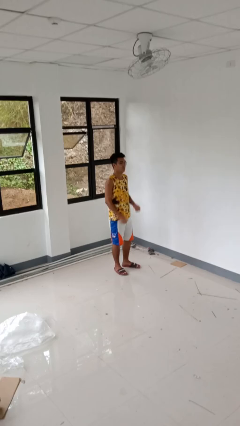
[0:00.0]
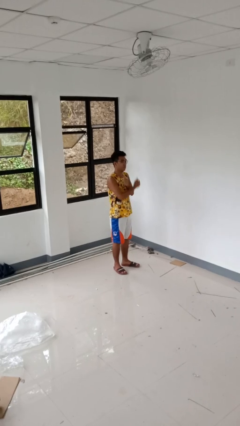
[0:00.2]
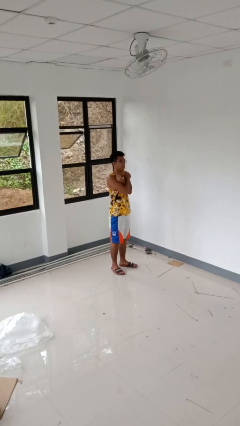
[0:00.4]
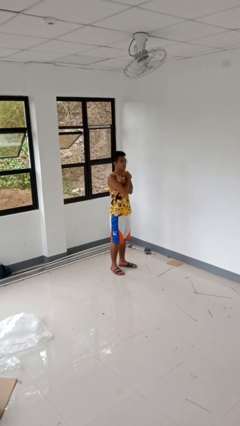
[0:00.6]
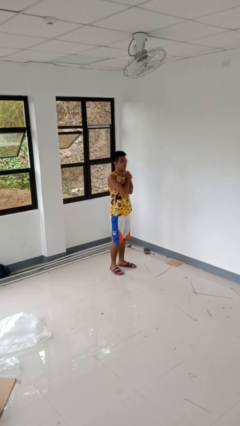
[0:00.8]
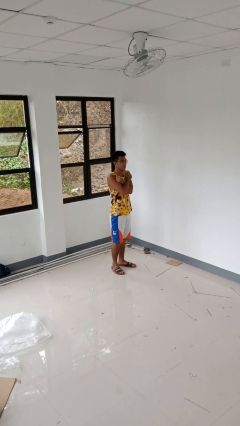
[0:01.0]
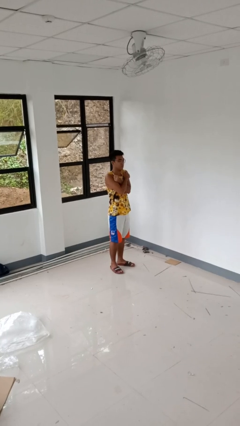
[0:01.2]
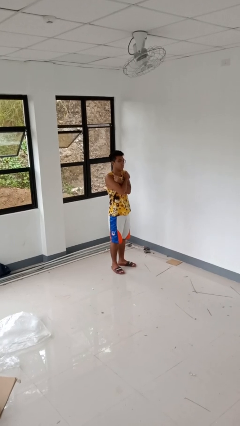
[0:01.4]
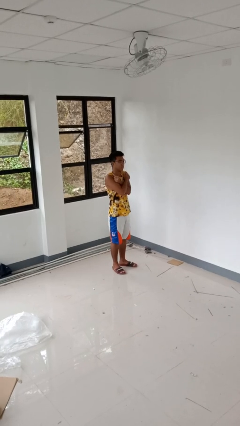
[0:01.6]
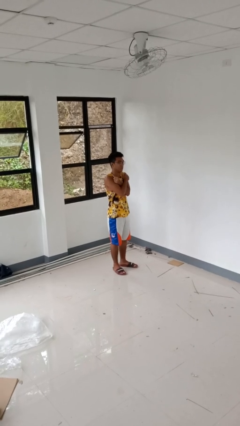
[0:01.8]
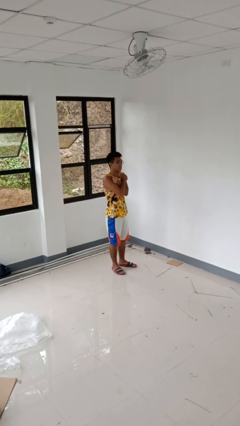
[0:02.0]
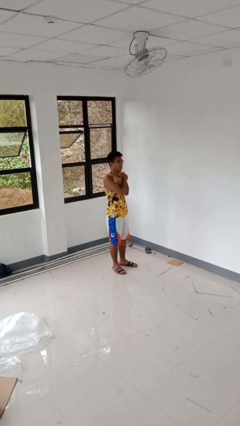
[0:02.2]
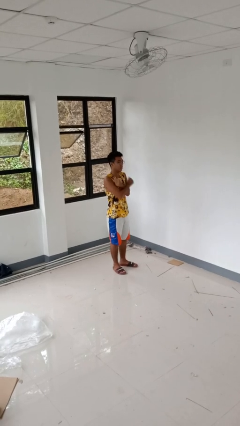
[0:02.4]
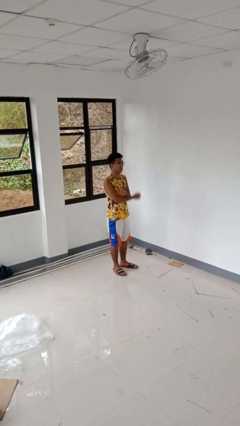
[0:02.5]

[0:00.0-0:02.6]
person gestures arms x

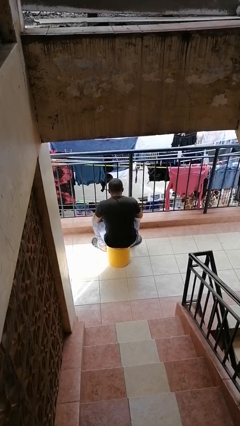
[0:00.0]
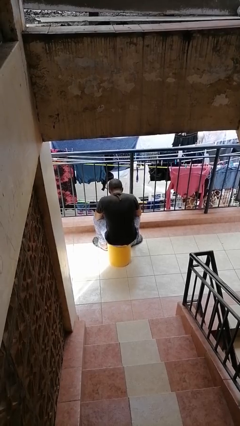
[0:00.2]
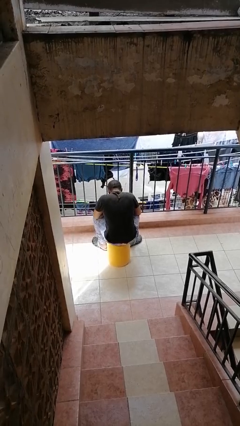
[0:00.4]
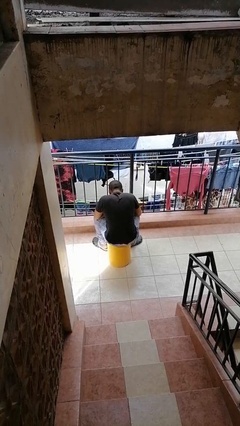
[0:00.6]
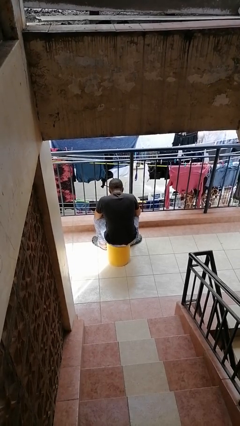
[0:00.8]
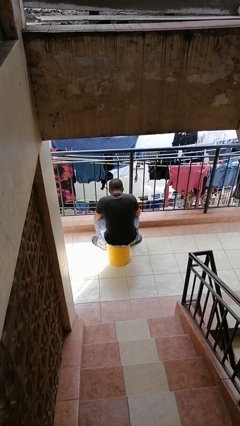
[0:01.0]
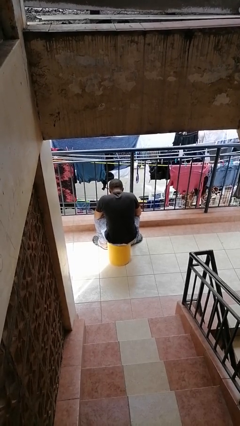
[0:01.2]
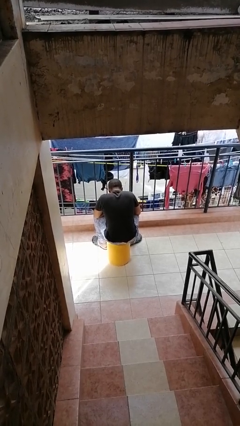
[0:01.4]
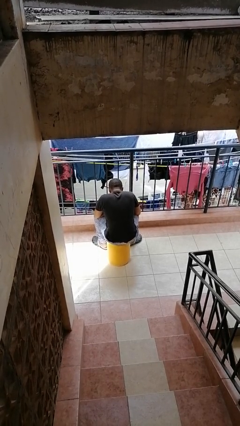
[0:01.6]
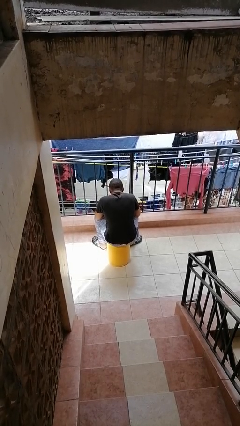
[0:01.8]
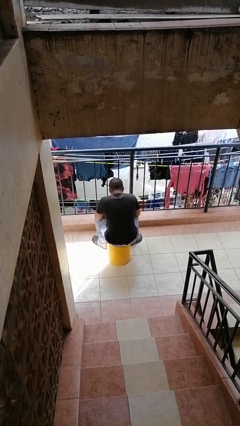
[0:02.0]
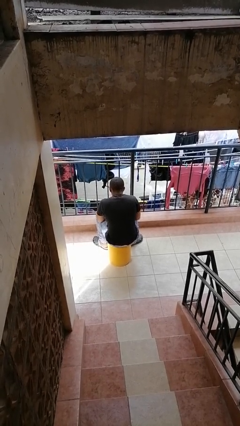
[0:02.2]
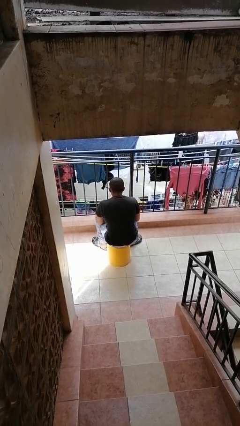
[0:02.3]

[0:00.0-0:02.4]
person blows into hands

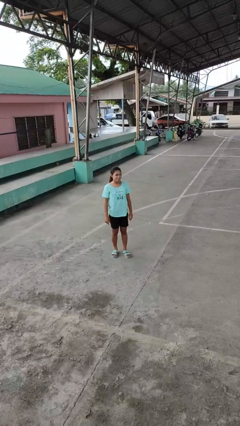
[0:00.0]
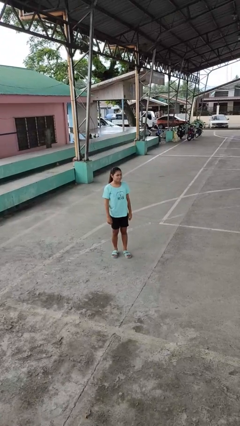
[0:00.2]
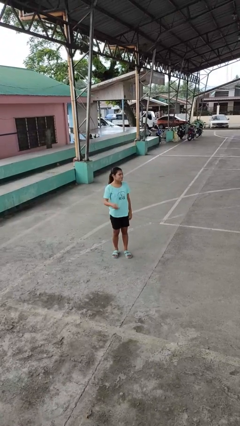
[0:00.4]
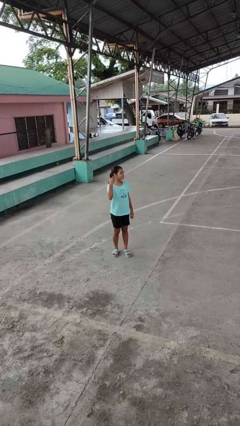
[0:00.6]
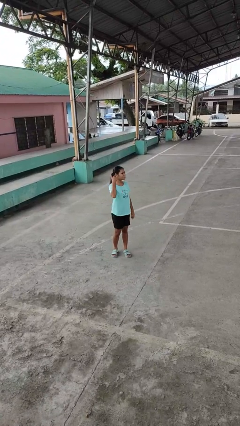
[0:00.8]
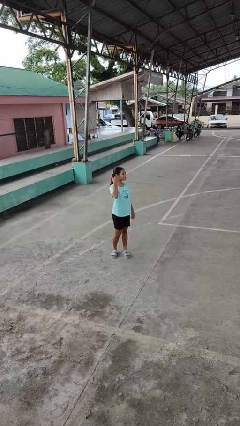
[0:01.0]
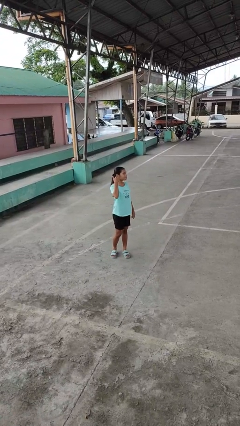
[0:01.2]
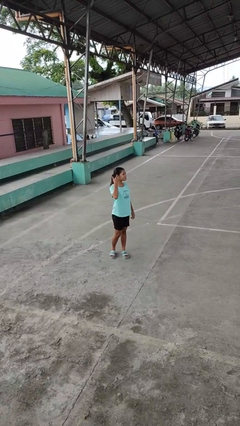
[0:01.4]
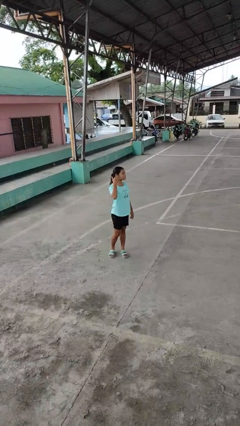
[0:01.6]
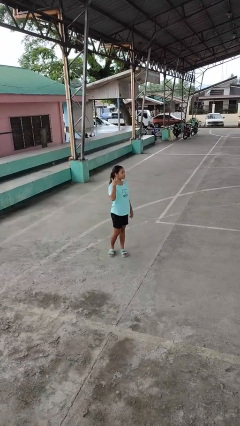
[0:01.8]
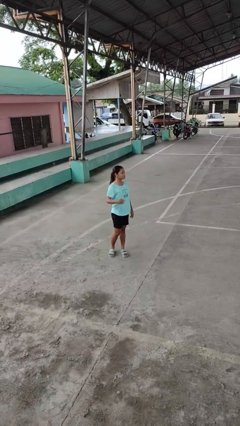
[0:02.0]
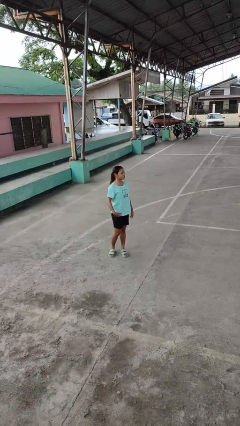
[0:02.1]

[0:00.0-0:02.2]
person gestures listen closely

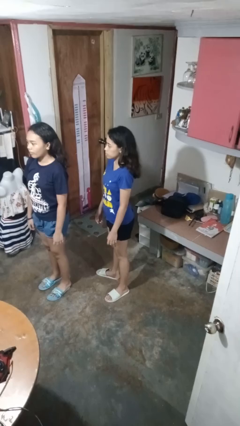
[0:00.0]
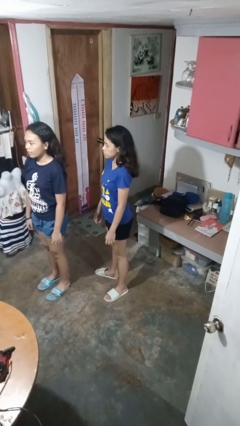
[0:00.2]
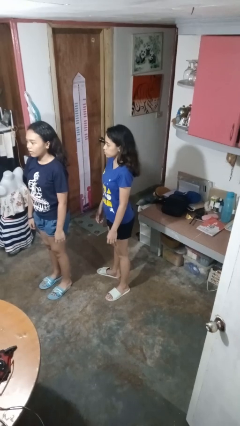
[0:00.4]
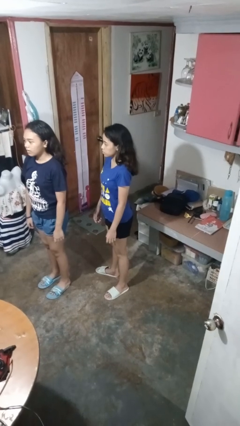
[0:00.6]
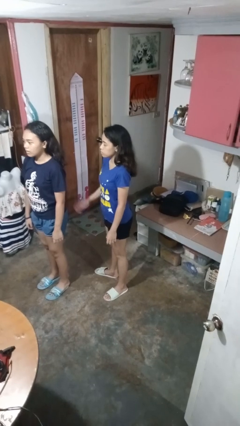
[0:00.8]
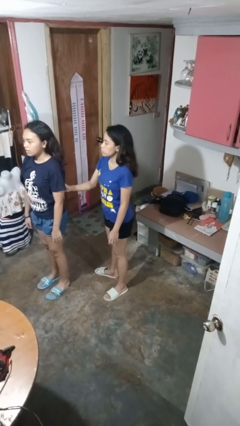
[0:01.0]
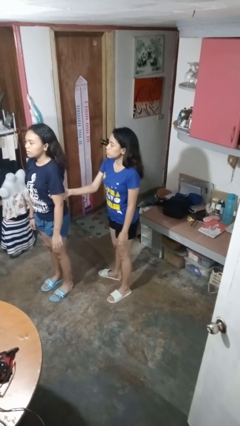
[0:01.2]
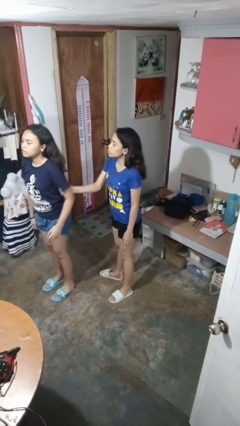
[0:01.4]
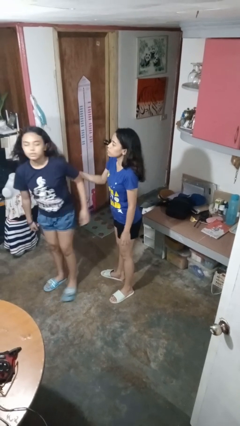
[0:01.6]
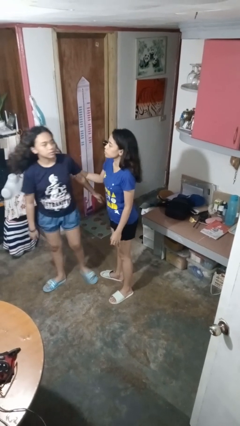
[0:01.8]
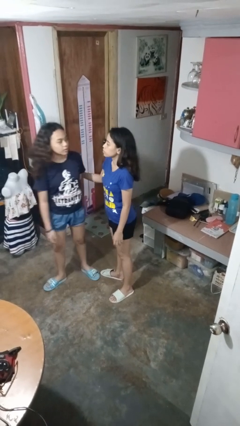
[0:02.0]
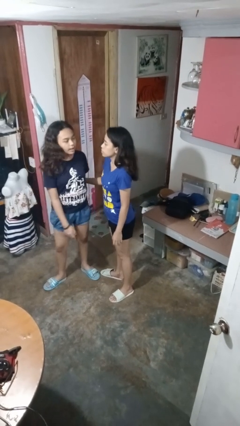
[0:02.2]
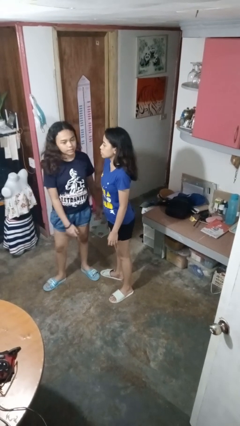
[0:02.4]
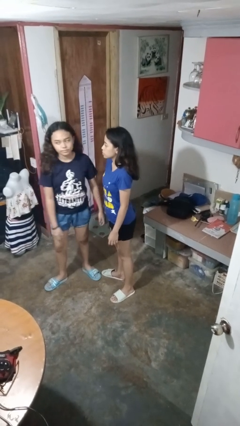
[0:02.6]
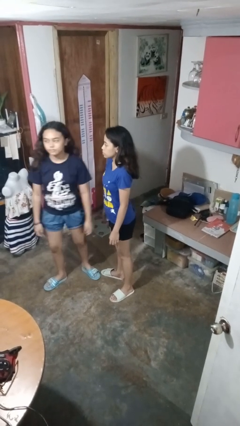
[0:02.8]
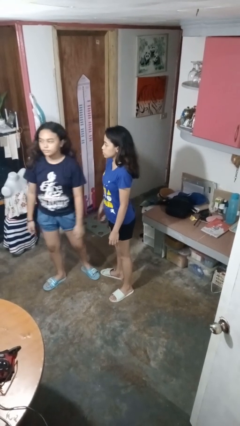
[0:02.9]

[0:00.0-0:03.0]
person grabs person by bicep

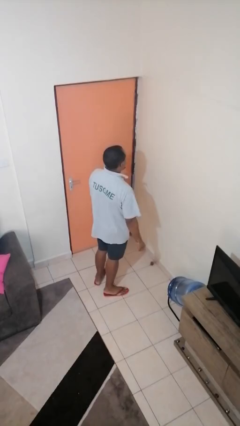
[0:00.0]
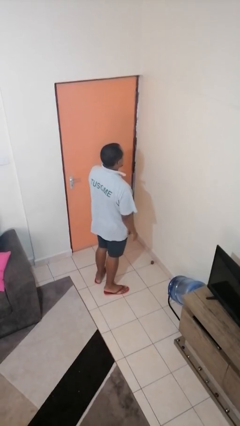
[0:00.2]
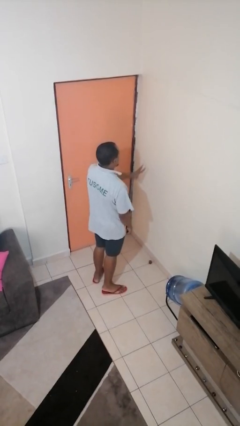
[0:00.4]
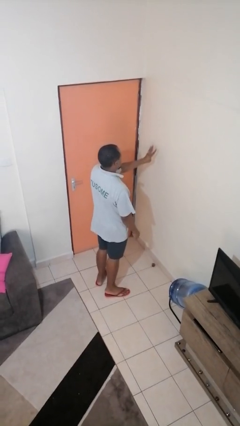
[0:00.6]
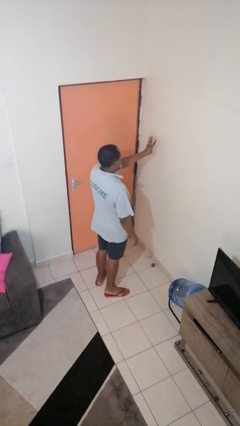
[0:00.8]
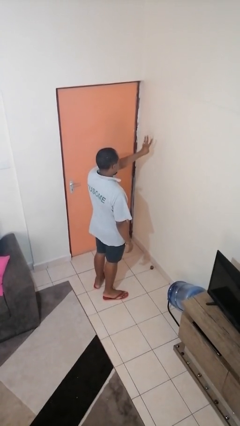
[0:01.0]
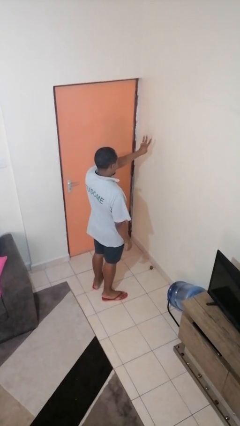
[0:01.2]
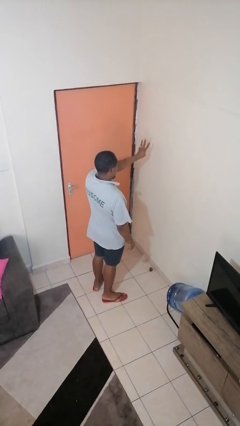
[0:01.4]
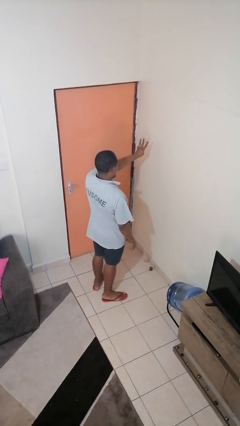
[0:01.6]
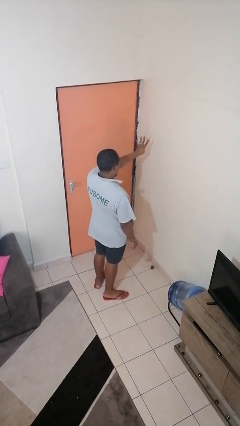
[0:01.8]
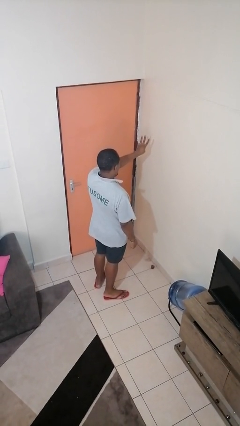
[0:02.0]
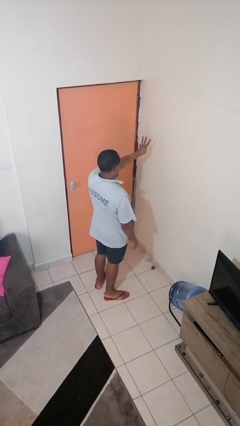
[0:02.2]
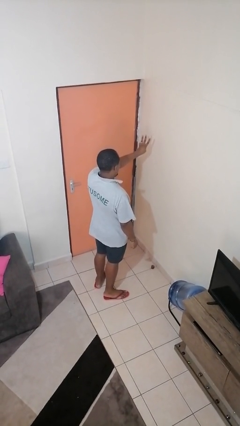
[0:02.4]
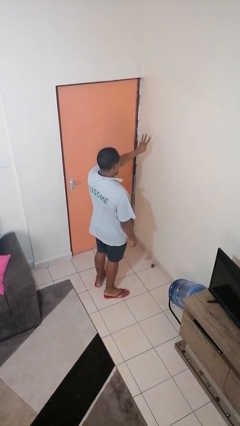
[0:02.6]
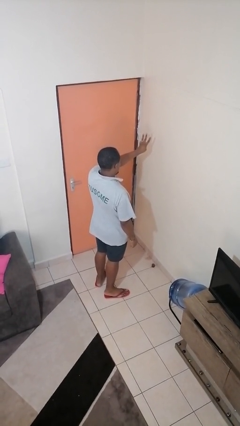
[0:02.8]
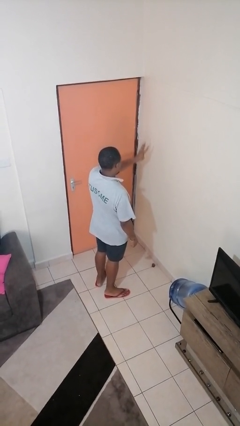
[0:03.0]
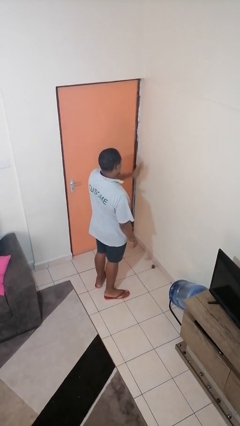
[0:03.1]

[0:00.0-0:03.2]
person gestures number three

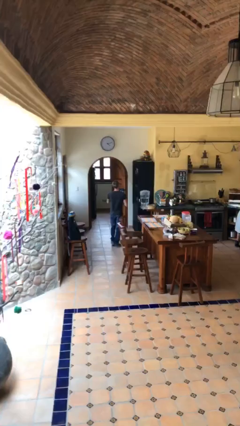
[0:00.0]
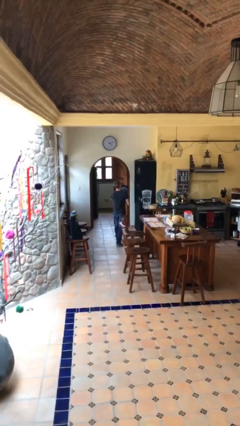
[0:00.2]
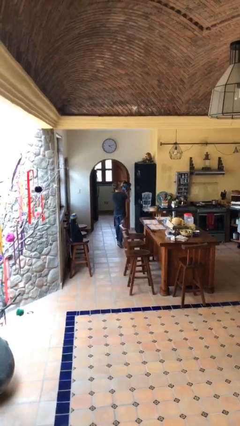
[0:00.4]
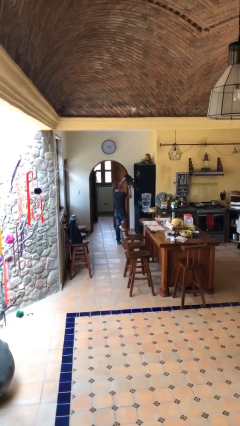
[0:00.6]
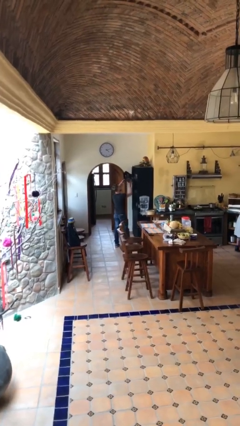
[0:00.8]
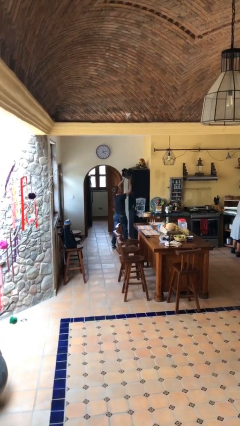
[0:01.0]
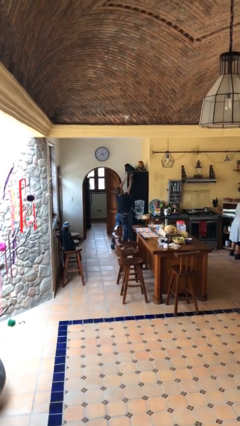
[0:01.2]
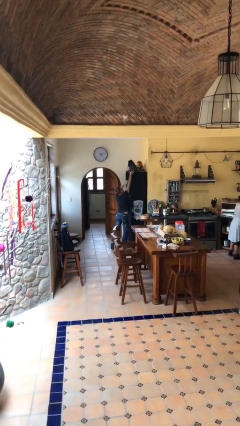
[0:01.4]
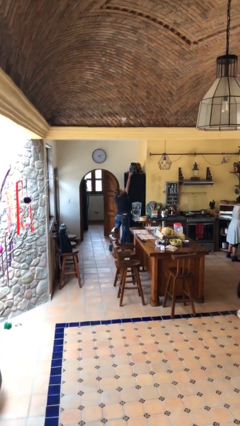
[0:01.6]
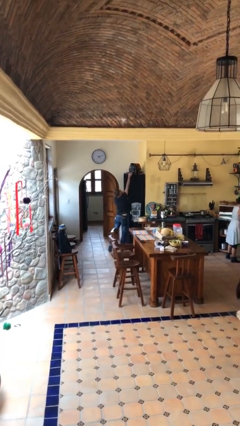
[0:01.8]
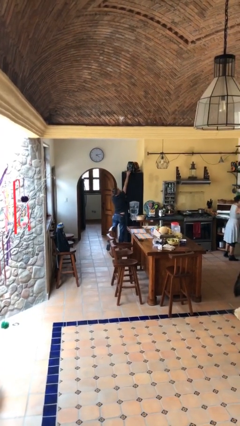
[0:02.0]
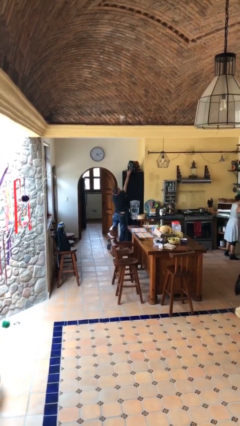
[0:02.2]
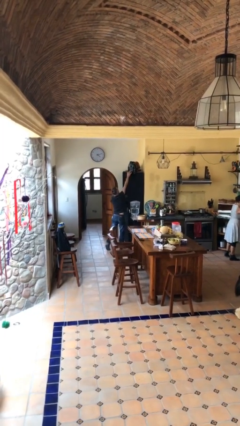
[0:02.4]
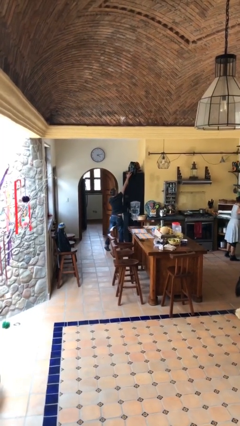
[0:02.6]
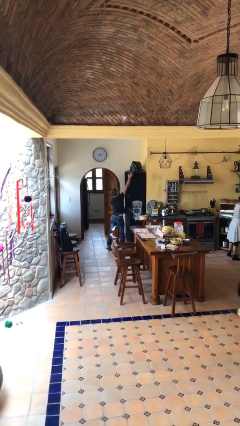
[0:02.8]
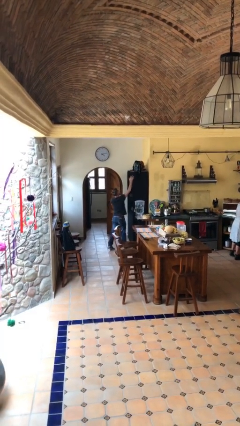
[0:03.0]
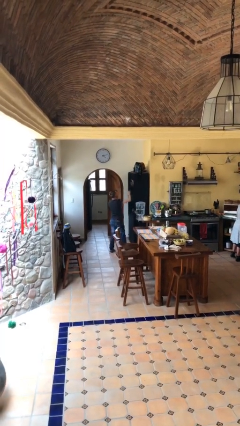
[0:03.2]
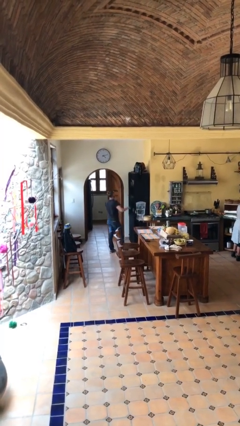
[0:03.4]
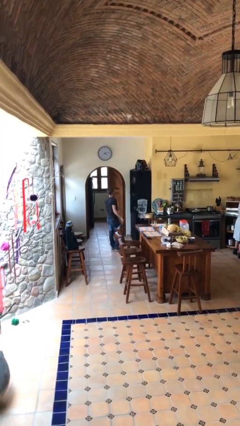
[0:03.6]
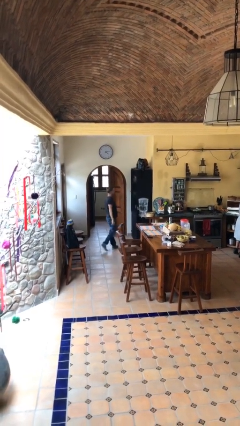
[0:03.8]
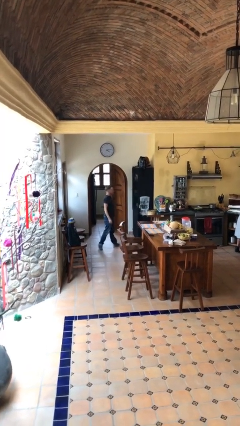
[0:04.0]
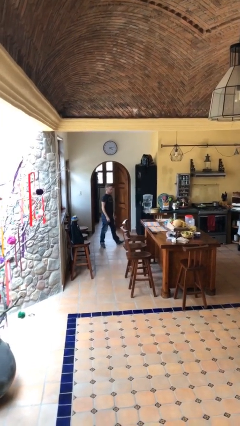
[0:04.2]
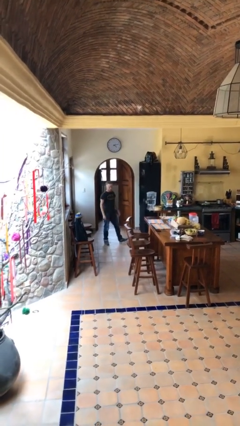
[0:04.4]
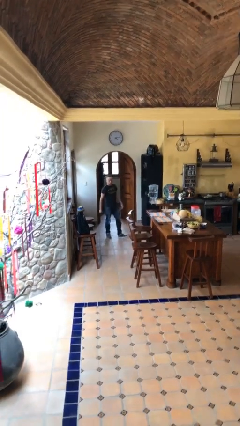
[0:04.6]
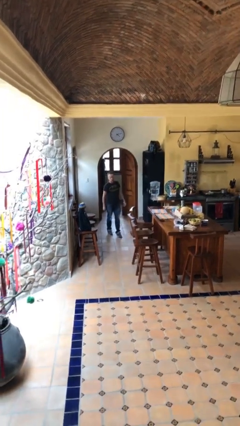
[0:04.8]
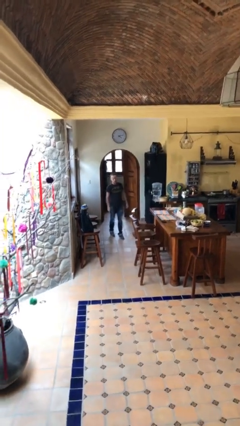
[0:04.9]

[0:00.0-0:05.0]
person puts down object on shelf
